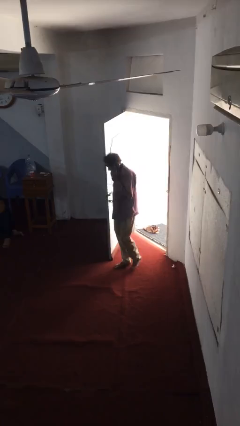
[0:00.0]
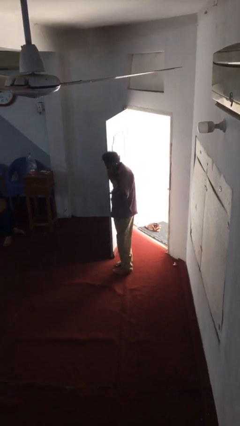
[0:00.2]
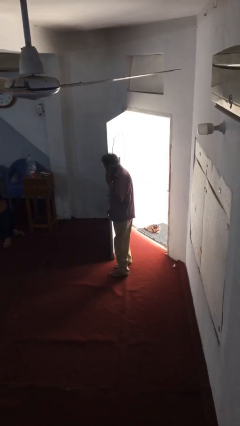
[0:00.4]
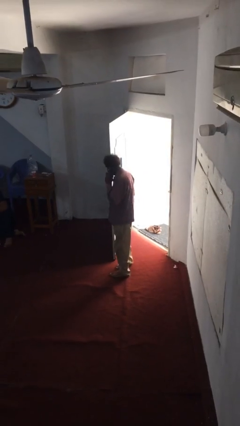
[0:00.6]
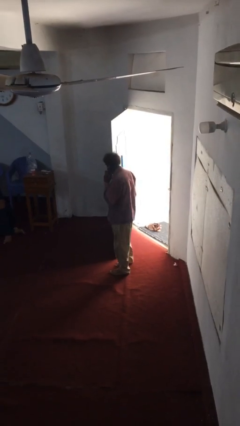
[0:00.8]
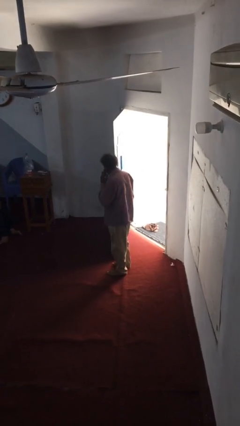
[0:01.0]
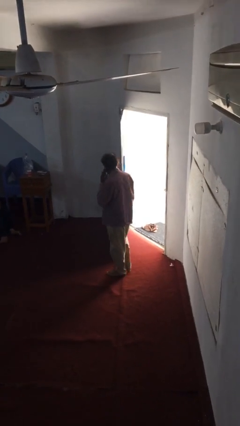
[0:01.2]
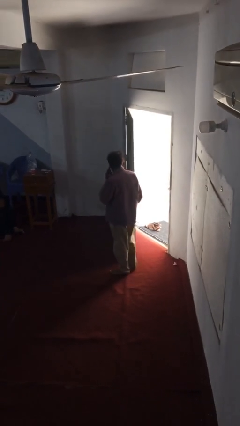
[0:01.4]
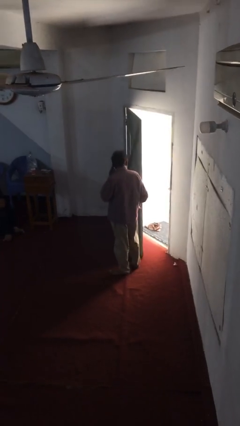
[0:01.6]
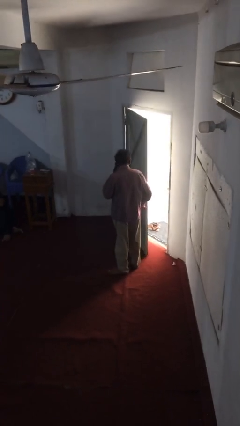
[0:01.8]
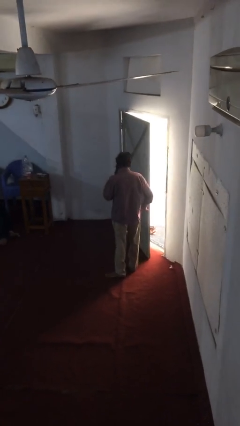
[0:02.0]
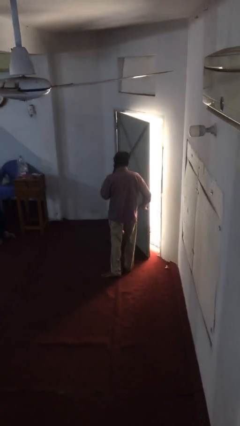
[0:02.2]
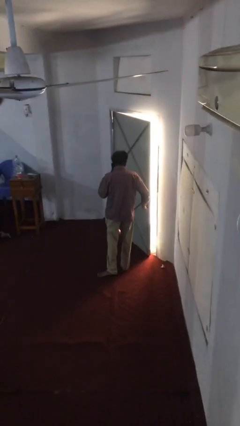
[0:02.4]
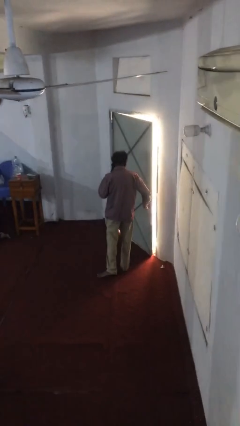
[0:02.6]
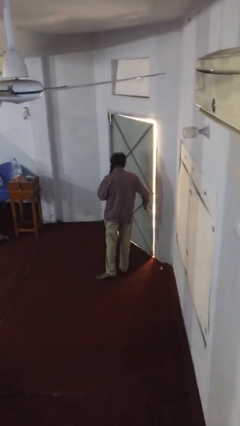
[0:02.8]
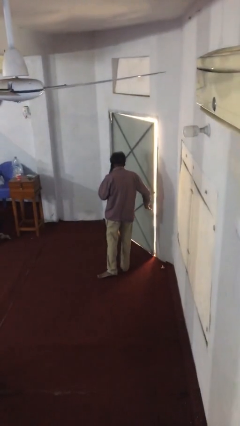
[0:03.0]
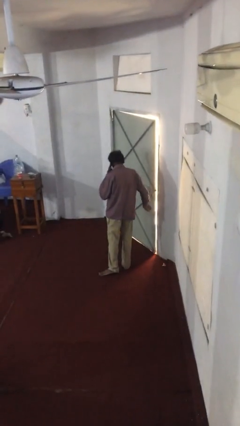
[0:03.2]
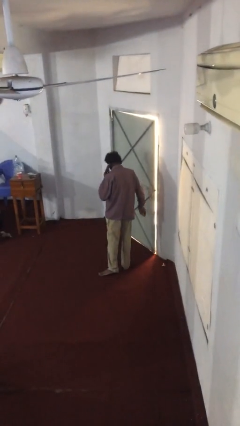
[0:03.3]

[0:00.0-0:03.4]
person closes facility door

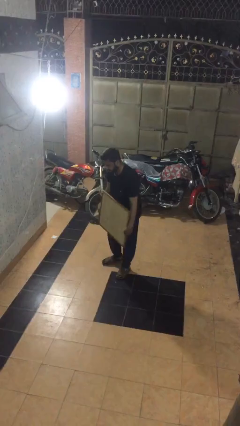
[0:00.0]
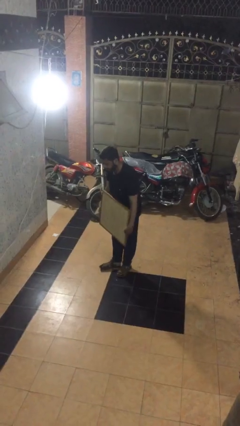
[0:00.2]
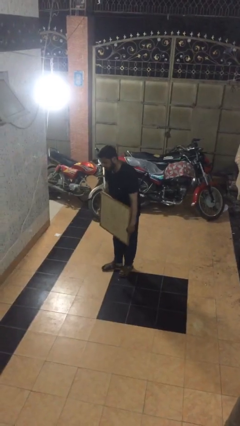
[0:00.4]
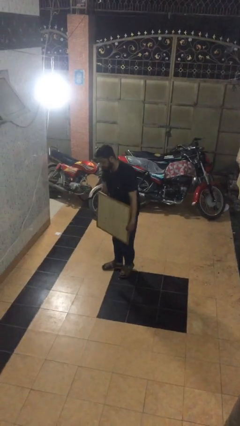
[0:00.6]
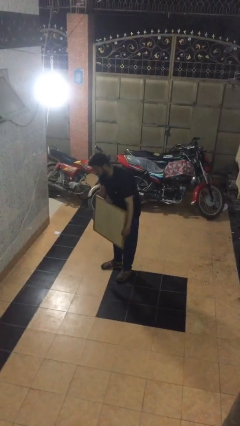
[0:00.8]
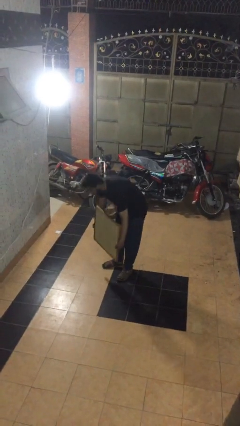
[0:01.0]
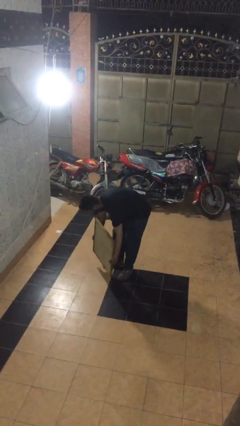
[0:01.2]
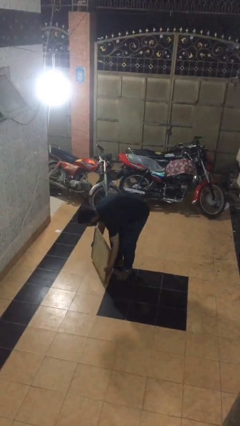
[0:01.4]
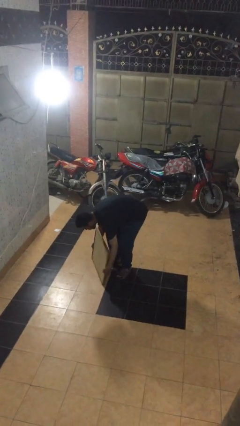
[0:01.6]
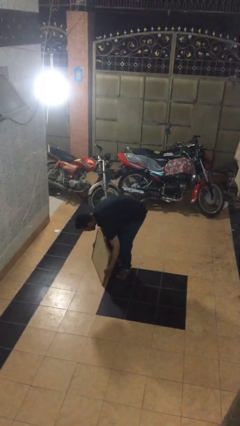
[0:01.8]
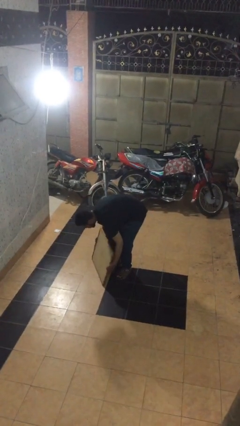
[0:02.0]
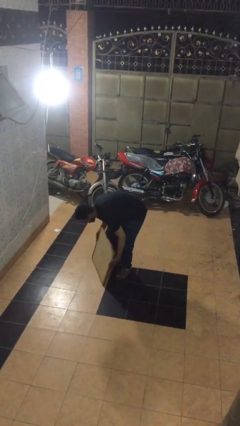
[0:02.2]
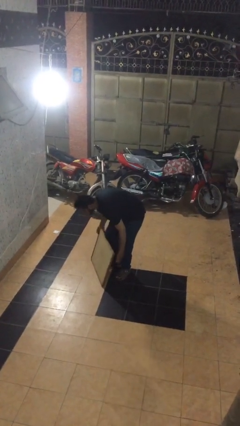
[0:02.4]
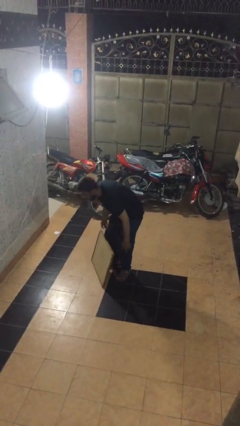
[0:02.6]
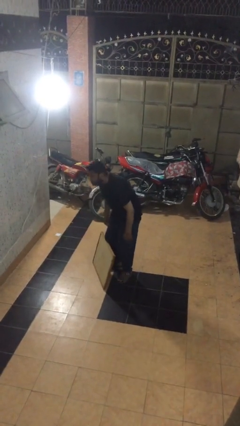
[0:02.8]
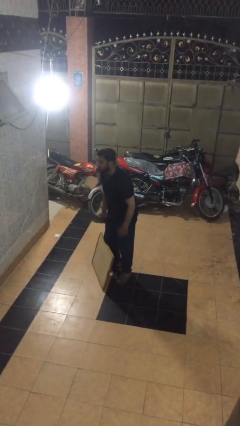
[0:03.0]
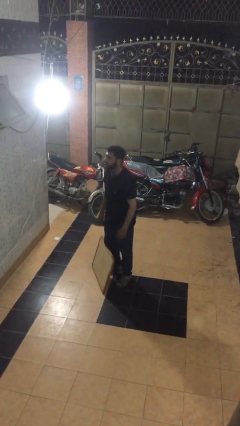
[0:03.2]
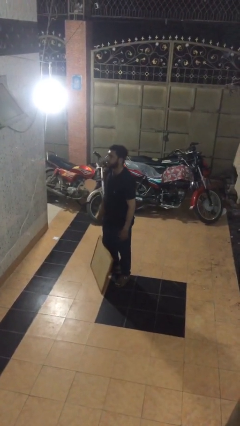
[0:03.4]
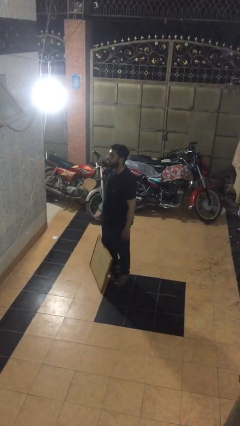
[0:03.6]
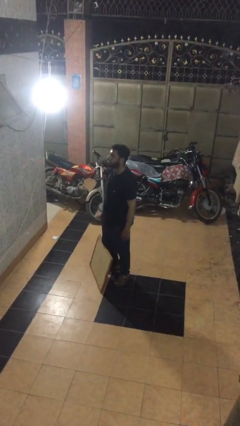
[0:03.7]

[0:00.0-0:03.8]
person puts down object on floor

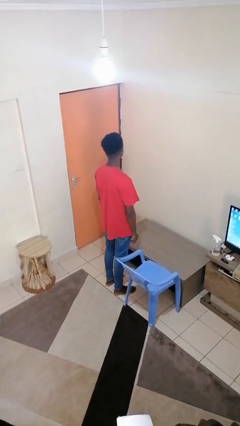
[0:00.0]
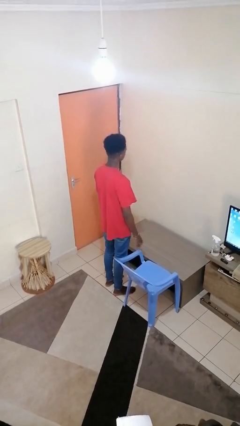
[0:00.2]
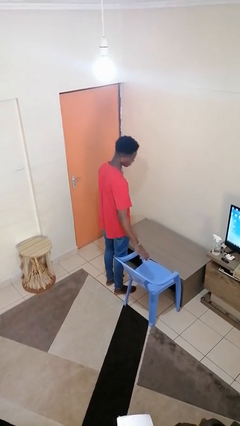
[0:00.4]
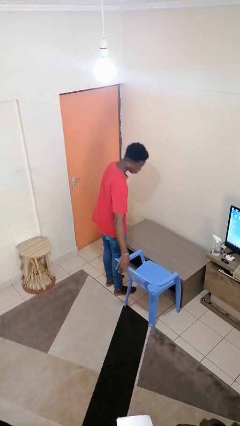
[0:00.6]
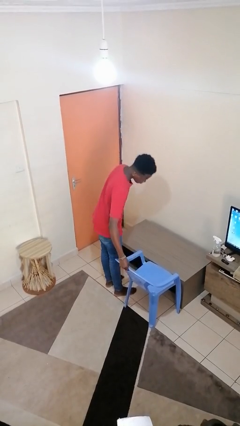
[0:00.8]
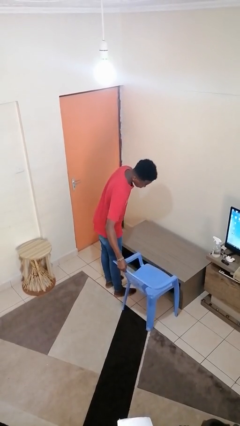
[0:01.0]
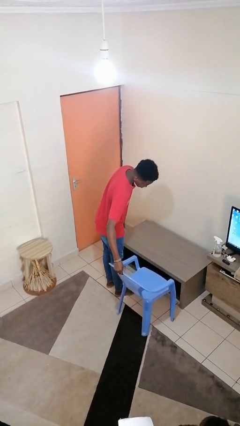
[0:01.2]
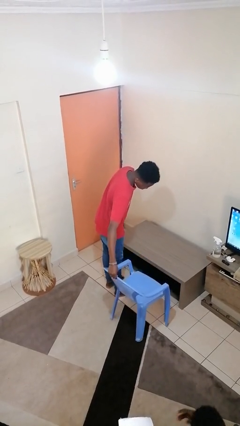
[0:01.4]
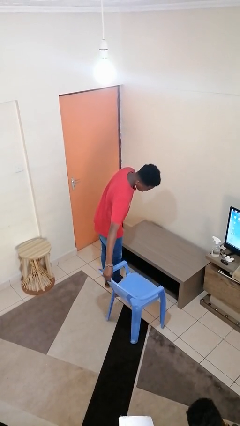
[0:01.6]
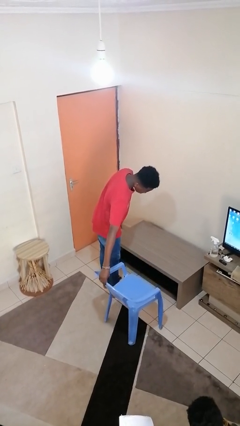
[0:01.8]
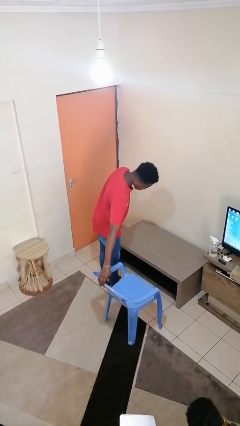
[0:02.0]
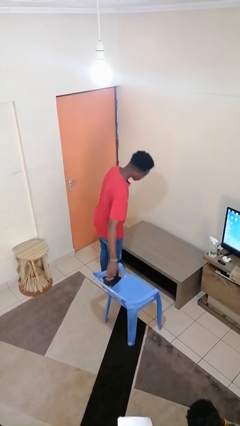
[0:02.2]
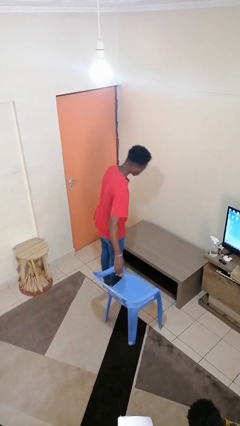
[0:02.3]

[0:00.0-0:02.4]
person pulls out chair

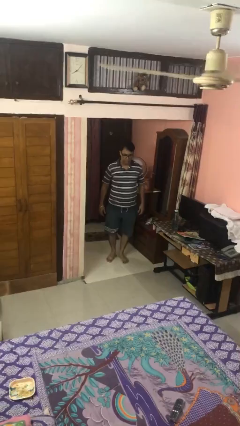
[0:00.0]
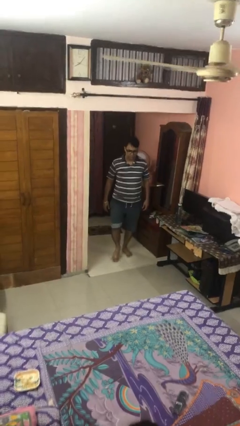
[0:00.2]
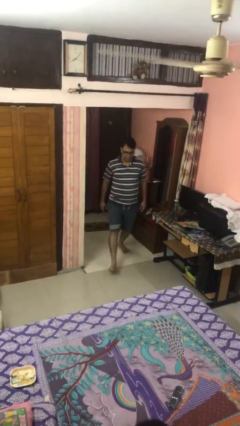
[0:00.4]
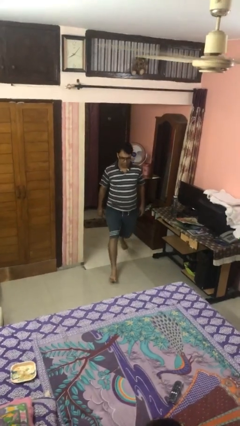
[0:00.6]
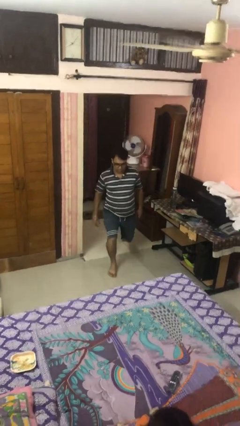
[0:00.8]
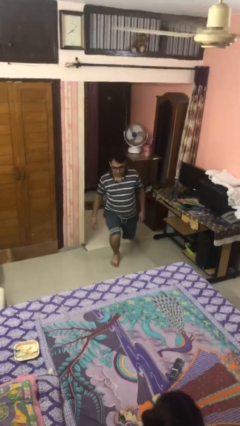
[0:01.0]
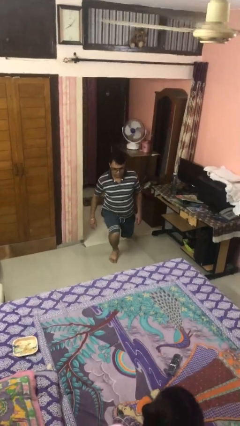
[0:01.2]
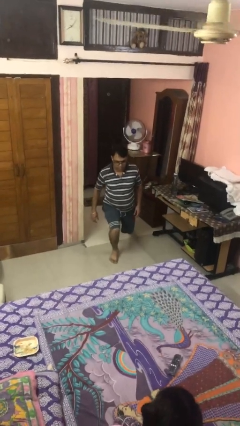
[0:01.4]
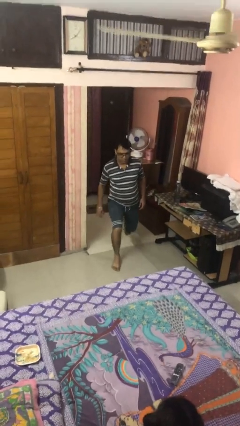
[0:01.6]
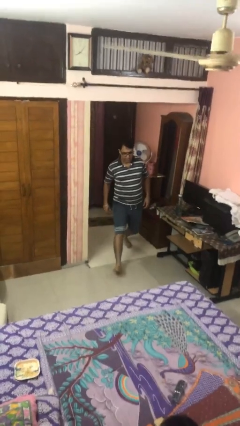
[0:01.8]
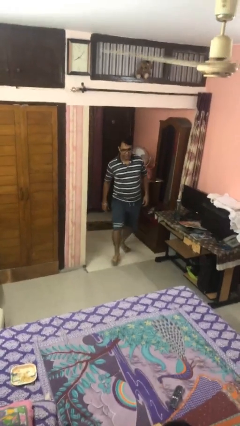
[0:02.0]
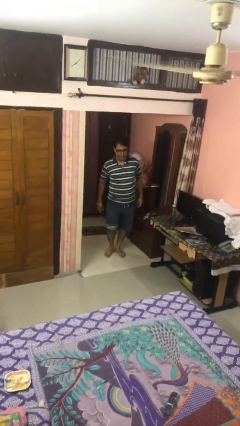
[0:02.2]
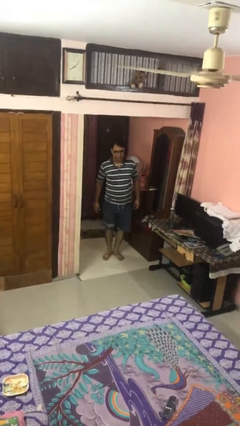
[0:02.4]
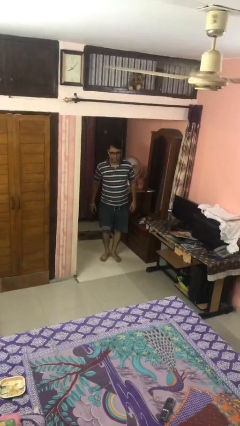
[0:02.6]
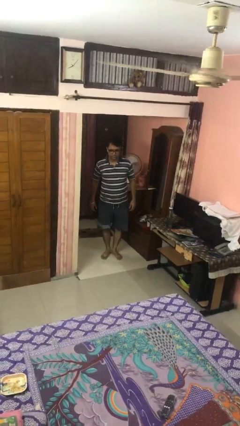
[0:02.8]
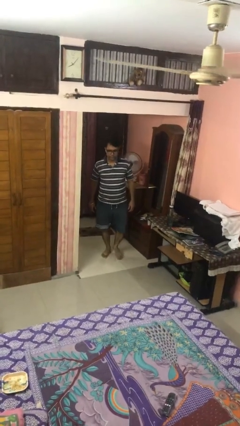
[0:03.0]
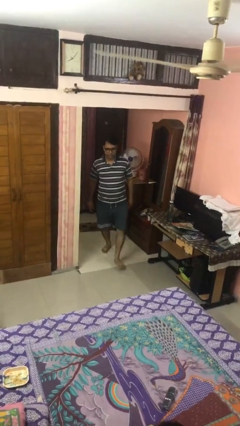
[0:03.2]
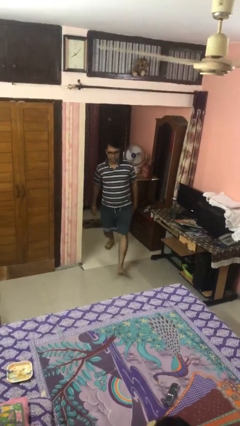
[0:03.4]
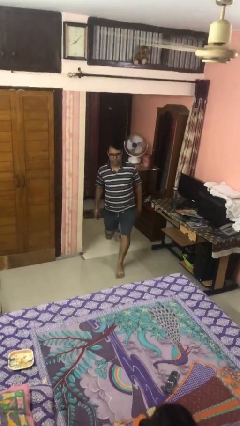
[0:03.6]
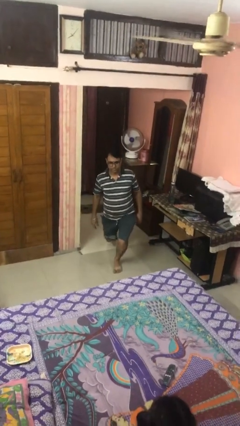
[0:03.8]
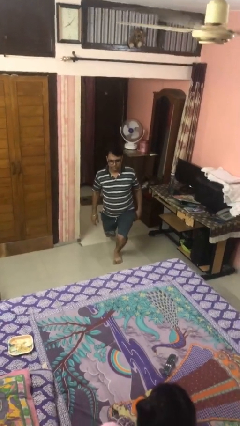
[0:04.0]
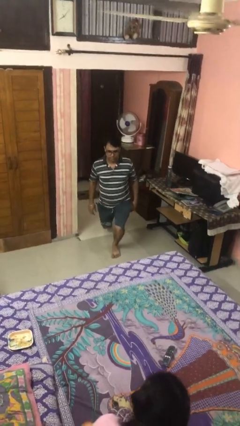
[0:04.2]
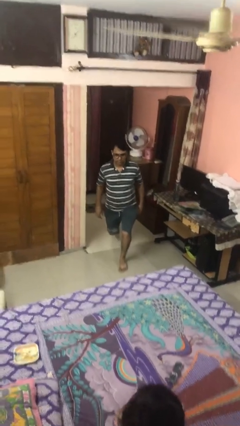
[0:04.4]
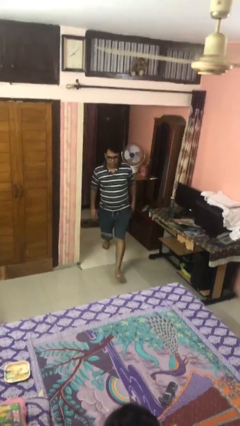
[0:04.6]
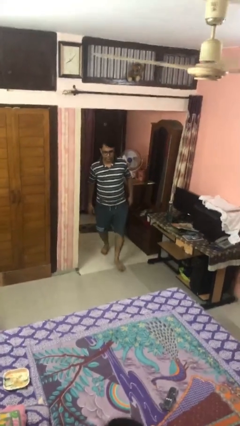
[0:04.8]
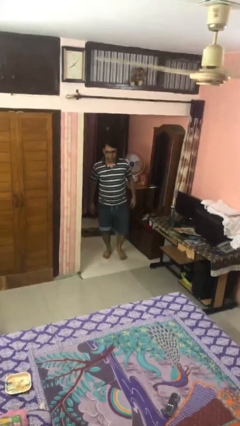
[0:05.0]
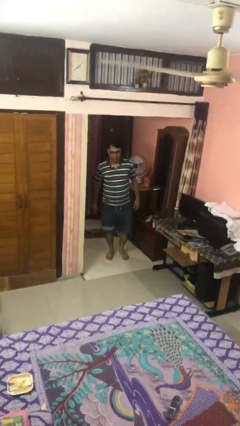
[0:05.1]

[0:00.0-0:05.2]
person exercises with lunges

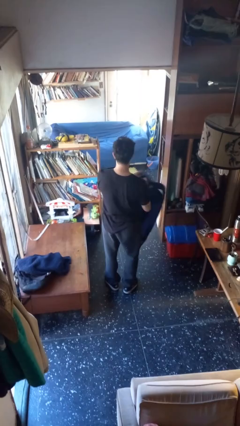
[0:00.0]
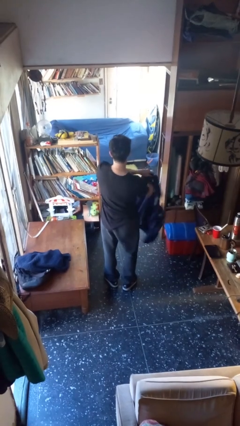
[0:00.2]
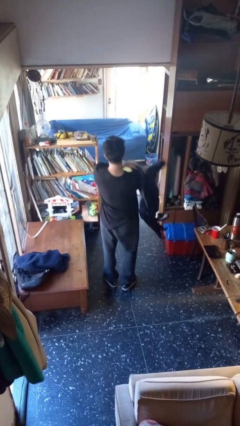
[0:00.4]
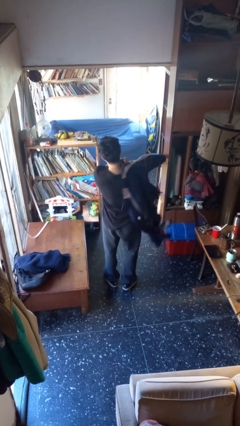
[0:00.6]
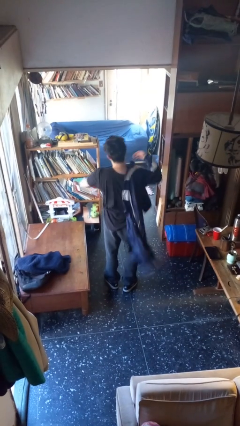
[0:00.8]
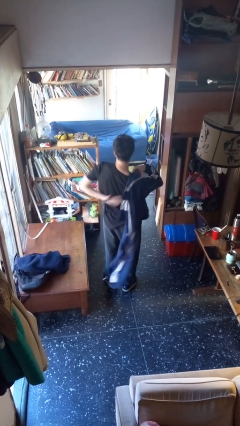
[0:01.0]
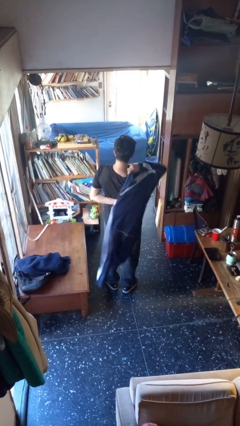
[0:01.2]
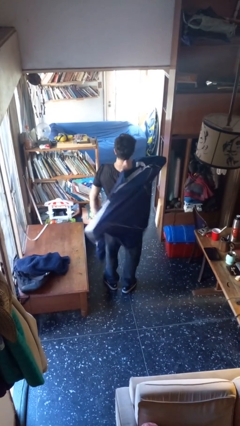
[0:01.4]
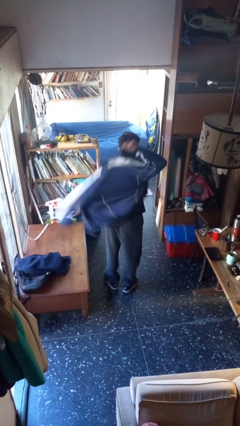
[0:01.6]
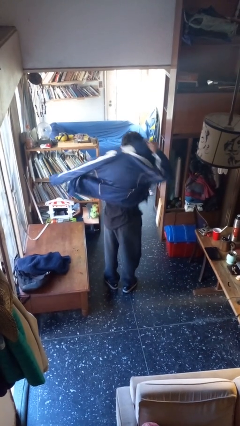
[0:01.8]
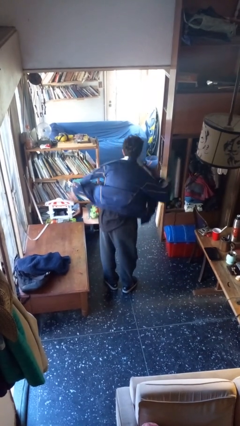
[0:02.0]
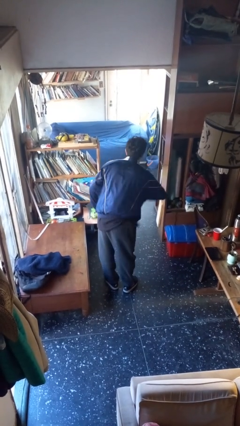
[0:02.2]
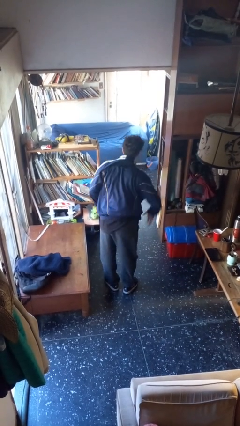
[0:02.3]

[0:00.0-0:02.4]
person puts on jacket

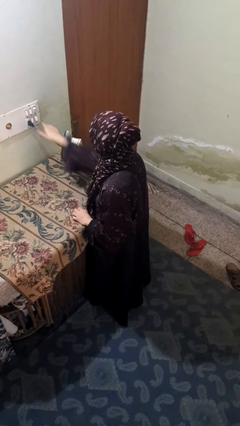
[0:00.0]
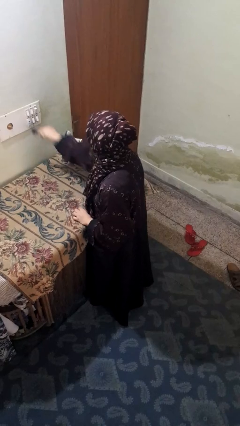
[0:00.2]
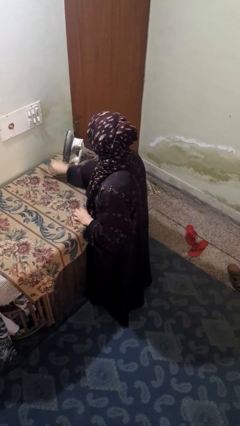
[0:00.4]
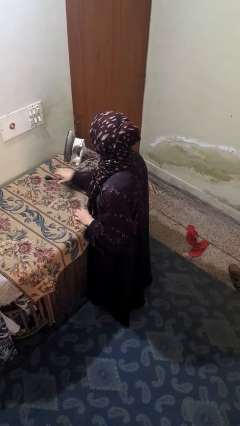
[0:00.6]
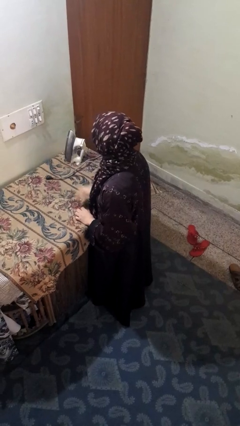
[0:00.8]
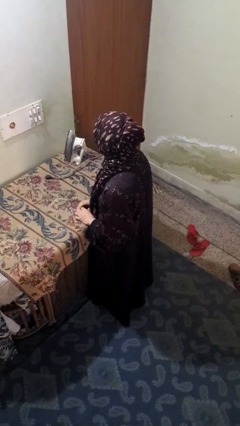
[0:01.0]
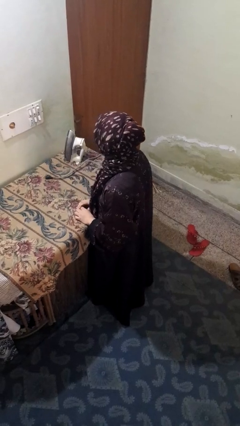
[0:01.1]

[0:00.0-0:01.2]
person unplugs from electrical socket
